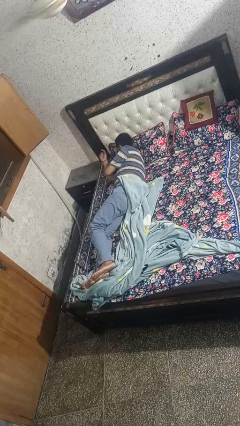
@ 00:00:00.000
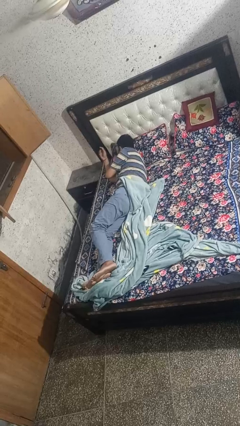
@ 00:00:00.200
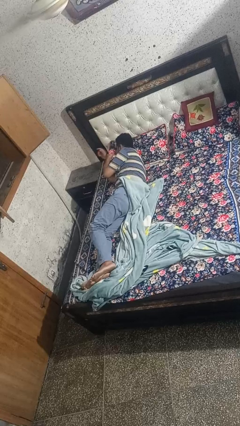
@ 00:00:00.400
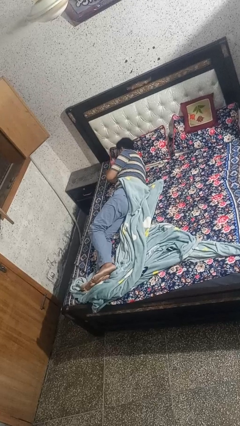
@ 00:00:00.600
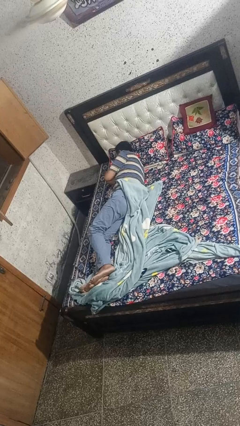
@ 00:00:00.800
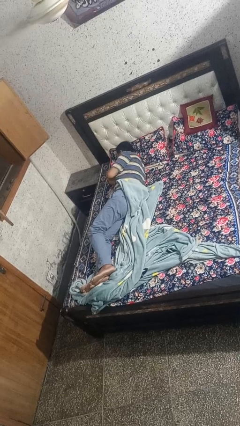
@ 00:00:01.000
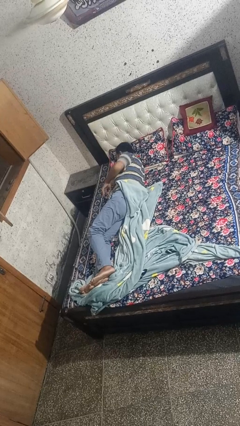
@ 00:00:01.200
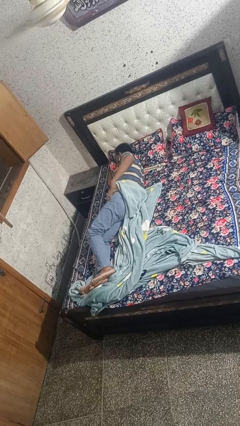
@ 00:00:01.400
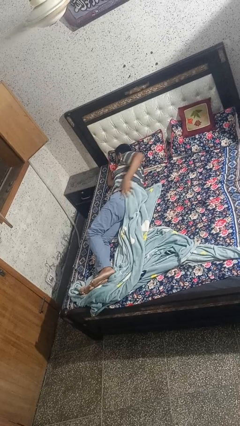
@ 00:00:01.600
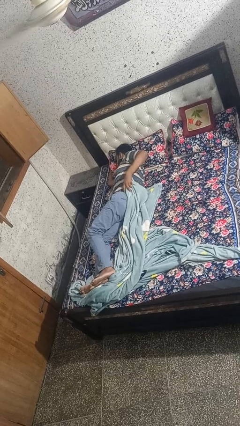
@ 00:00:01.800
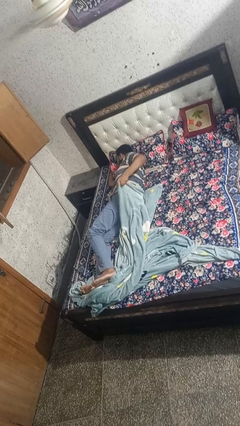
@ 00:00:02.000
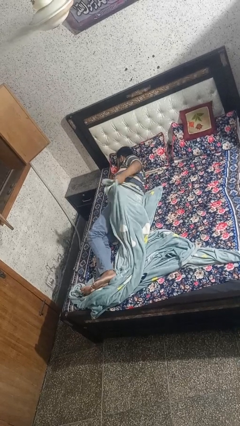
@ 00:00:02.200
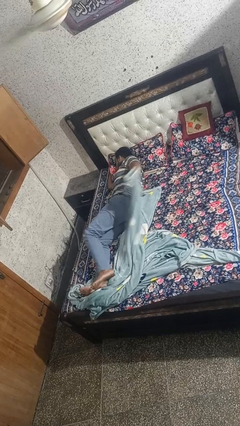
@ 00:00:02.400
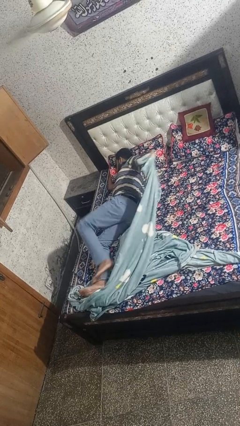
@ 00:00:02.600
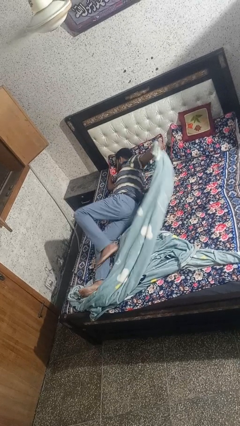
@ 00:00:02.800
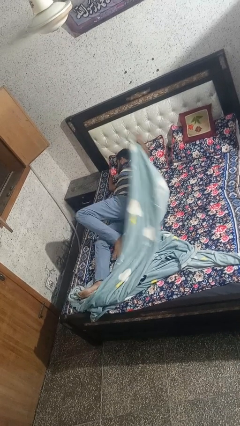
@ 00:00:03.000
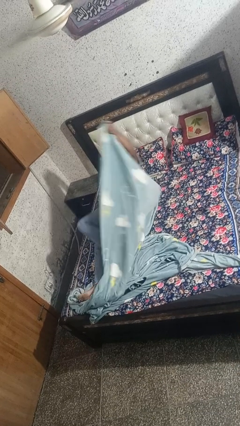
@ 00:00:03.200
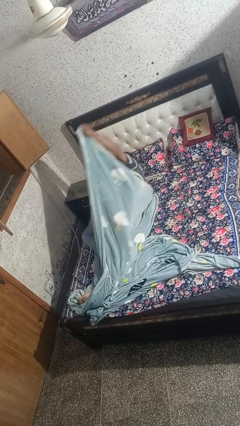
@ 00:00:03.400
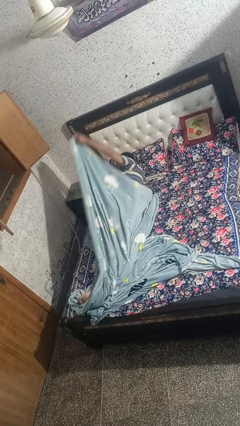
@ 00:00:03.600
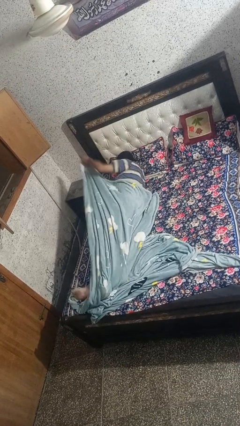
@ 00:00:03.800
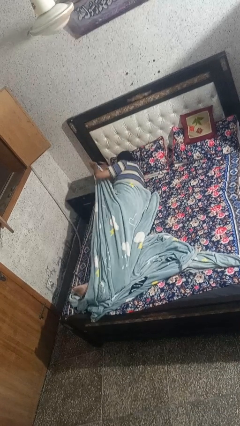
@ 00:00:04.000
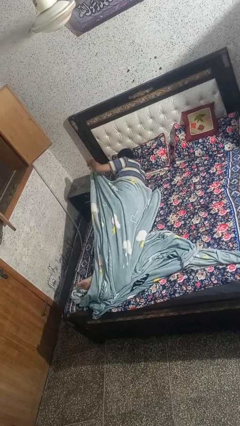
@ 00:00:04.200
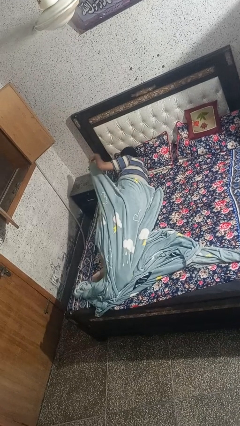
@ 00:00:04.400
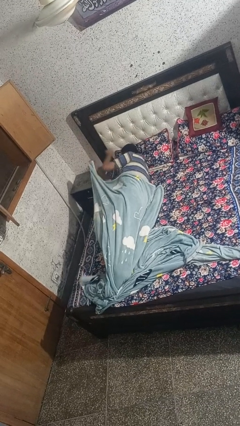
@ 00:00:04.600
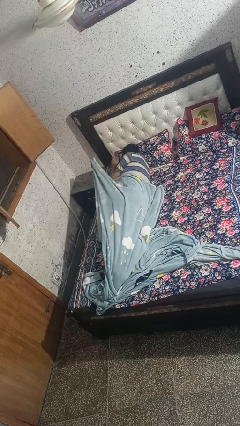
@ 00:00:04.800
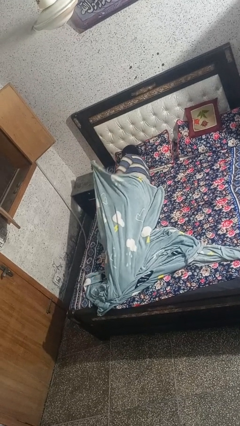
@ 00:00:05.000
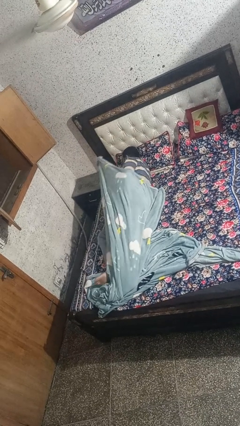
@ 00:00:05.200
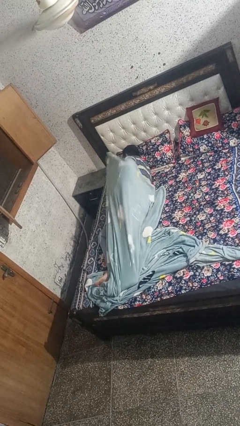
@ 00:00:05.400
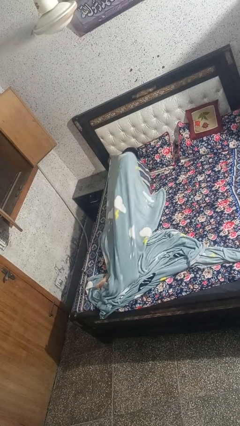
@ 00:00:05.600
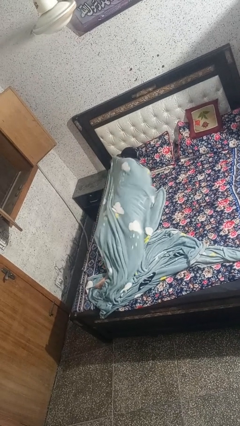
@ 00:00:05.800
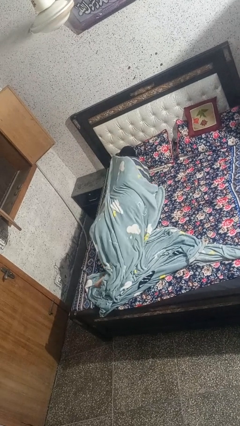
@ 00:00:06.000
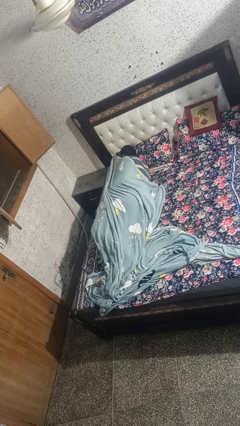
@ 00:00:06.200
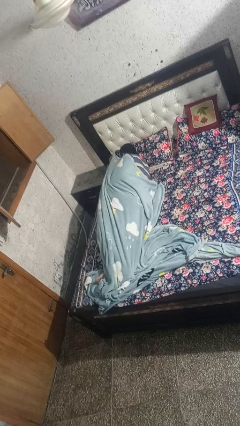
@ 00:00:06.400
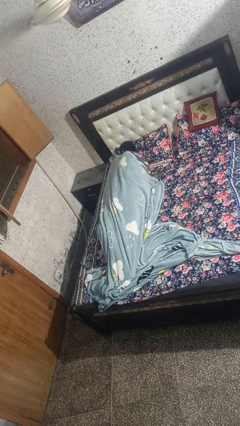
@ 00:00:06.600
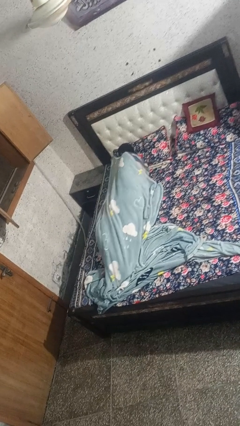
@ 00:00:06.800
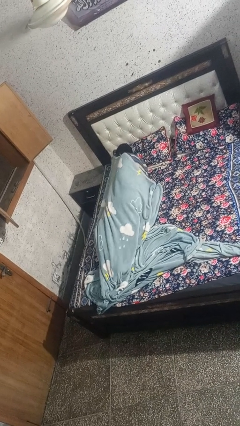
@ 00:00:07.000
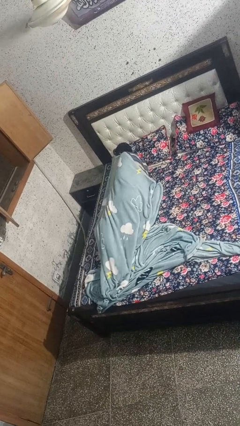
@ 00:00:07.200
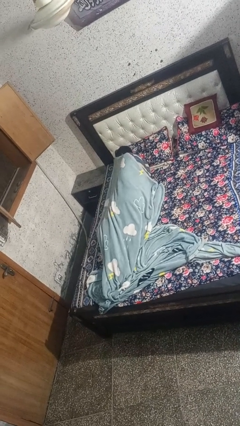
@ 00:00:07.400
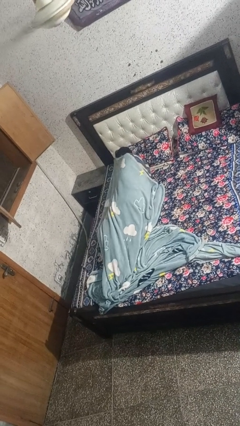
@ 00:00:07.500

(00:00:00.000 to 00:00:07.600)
person covers with bedsheets

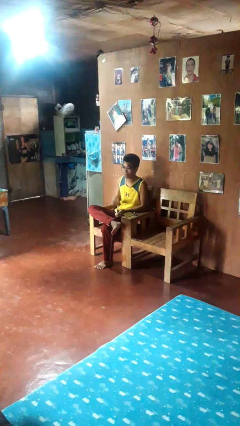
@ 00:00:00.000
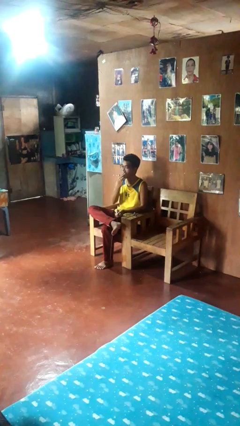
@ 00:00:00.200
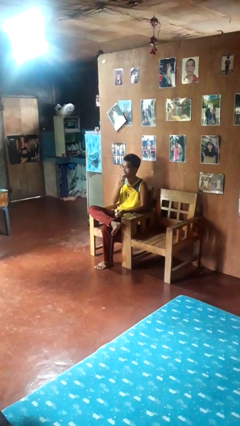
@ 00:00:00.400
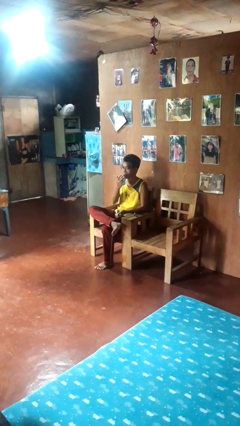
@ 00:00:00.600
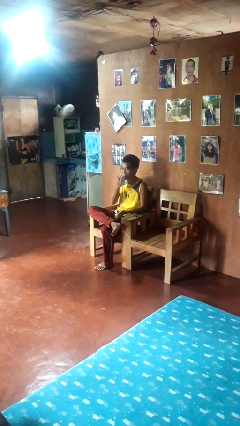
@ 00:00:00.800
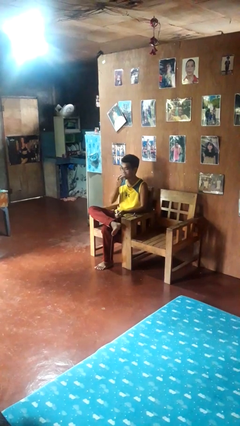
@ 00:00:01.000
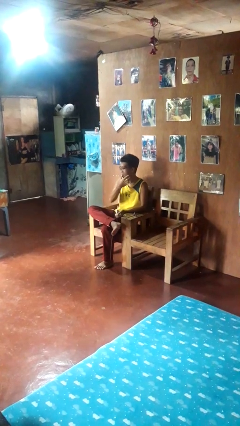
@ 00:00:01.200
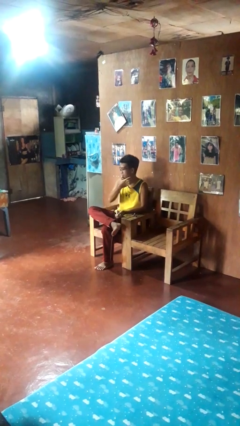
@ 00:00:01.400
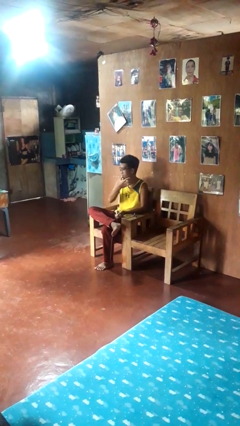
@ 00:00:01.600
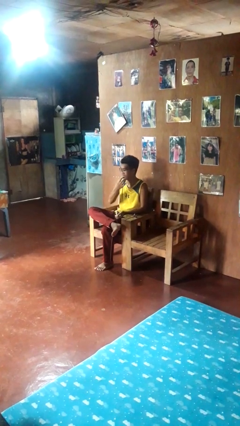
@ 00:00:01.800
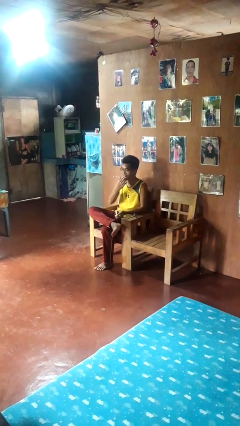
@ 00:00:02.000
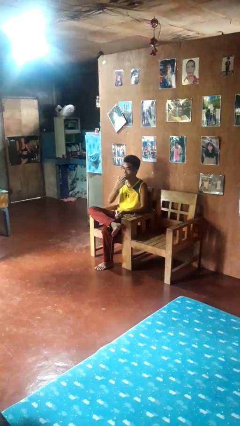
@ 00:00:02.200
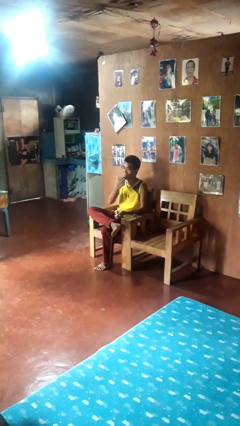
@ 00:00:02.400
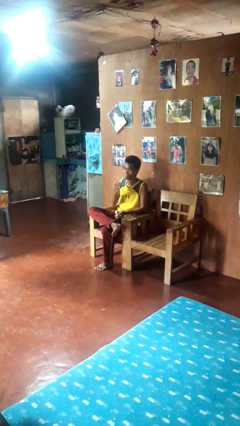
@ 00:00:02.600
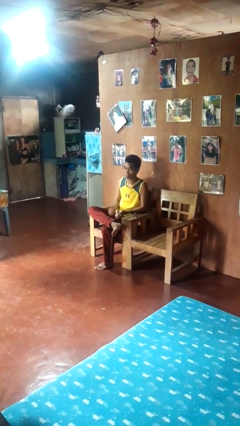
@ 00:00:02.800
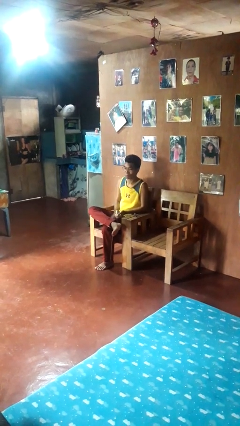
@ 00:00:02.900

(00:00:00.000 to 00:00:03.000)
person licks fingers

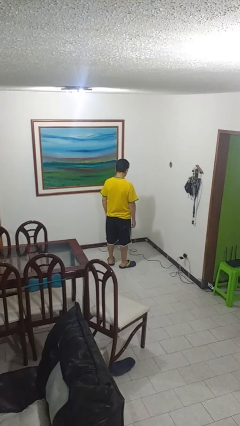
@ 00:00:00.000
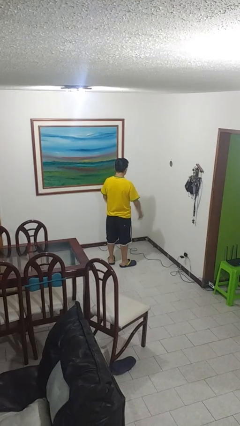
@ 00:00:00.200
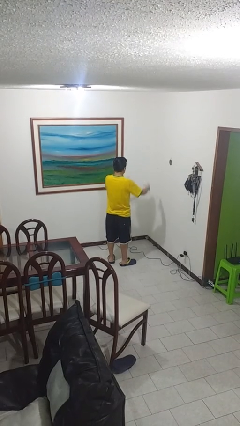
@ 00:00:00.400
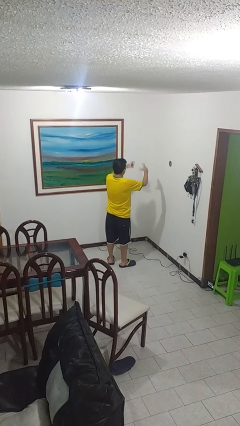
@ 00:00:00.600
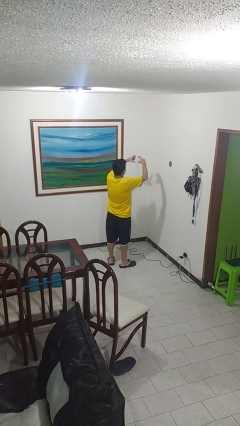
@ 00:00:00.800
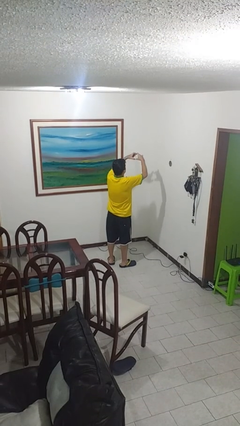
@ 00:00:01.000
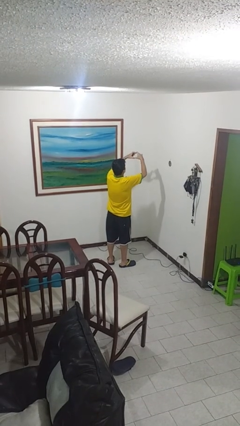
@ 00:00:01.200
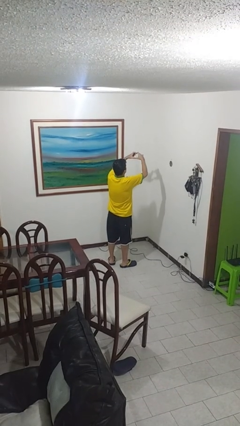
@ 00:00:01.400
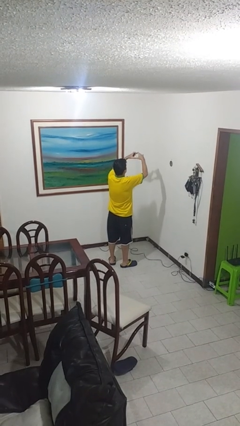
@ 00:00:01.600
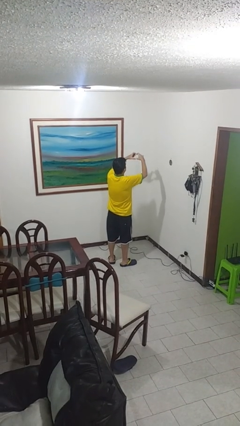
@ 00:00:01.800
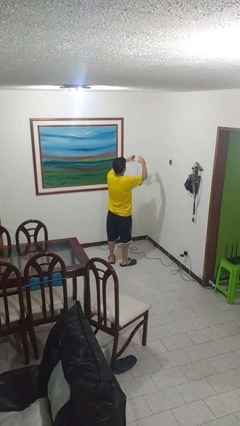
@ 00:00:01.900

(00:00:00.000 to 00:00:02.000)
person gestures heart

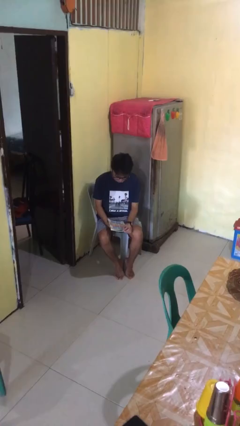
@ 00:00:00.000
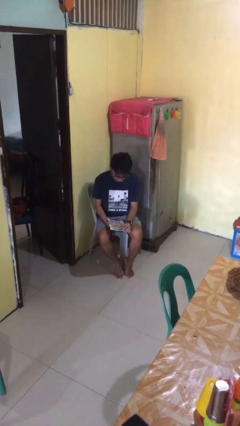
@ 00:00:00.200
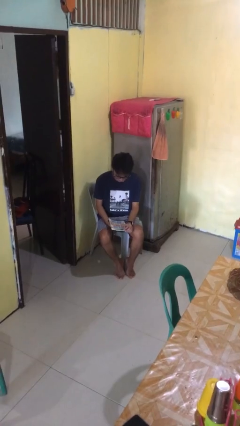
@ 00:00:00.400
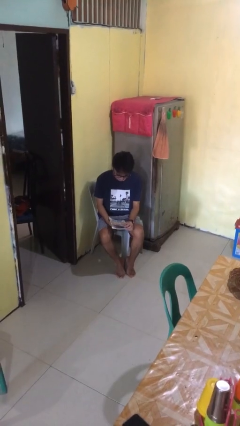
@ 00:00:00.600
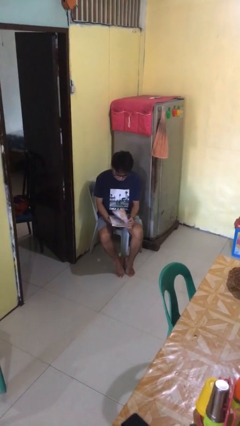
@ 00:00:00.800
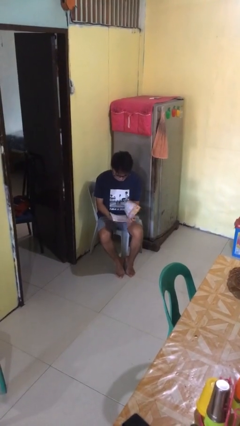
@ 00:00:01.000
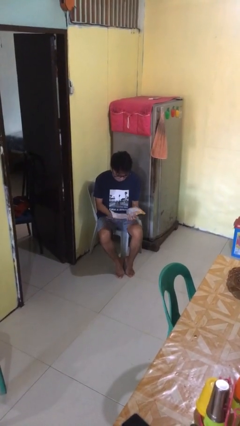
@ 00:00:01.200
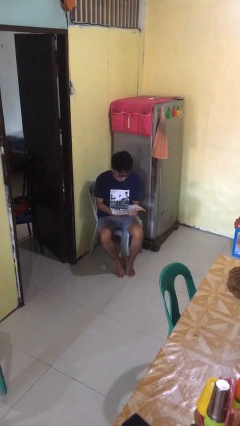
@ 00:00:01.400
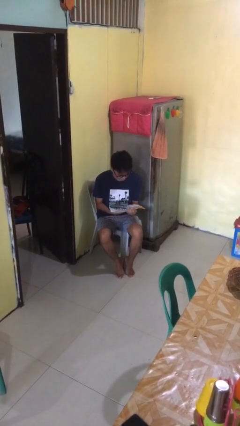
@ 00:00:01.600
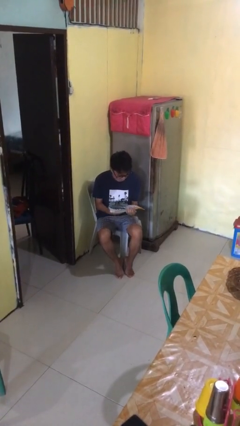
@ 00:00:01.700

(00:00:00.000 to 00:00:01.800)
person reads magazine

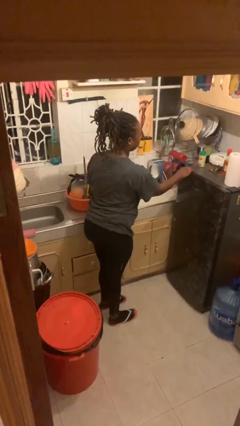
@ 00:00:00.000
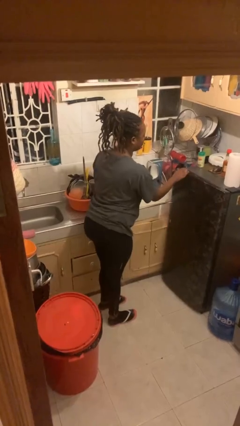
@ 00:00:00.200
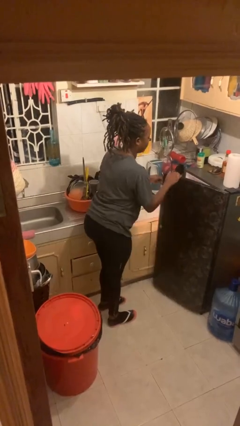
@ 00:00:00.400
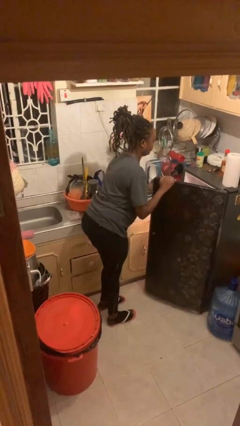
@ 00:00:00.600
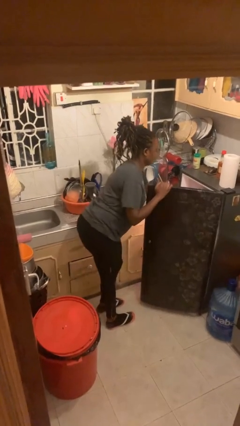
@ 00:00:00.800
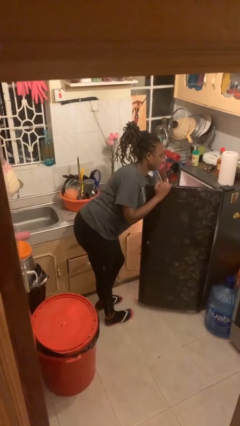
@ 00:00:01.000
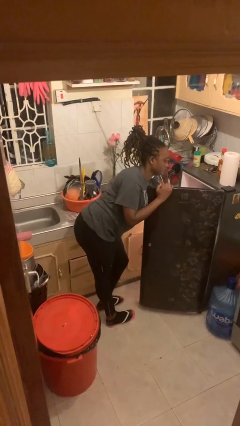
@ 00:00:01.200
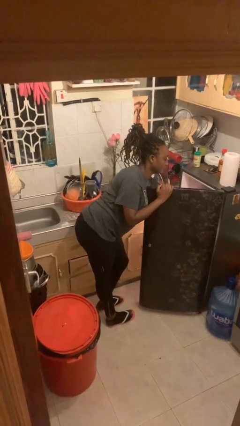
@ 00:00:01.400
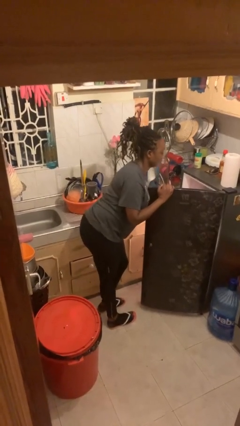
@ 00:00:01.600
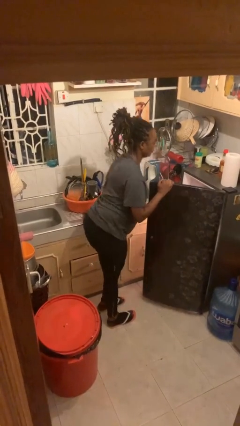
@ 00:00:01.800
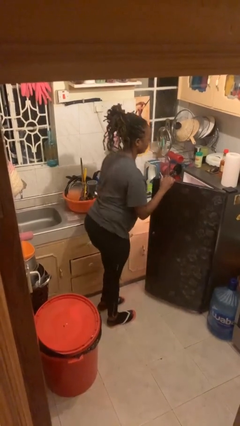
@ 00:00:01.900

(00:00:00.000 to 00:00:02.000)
person takes object from refrigerator

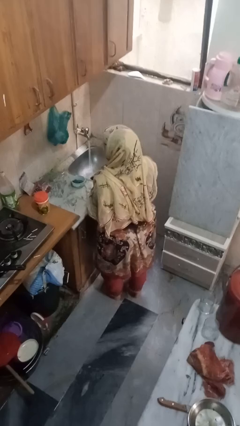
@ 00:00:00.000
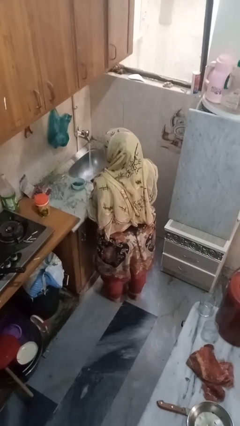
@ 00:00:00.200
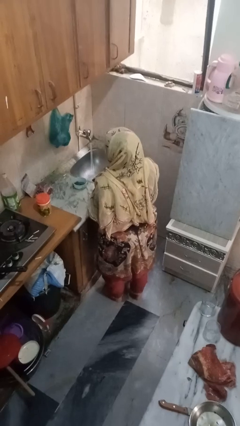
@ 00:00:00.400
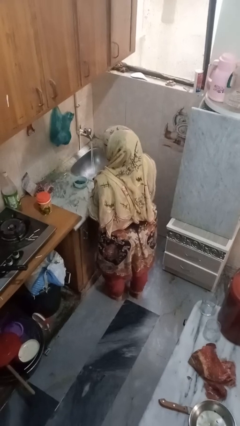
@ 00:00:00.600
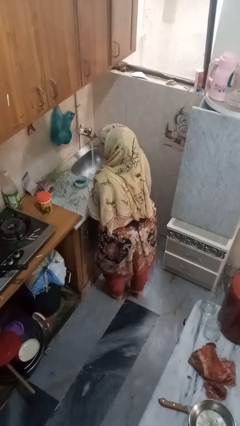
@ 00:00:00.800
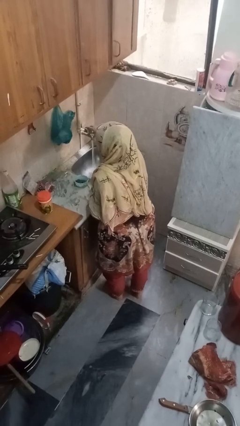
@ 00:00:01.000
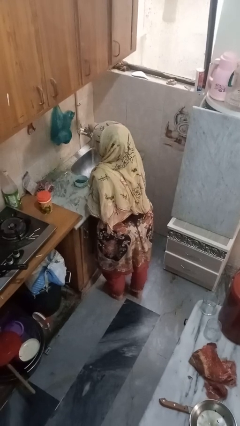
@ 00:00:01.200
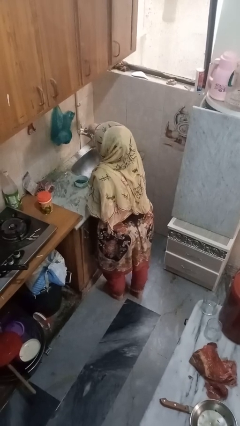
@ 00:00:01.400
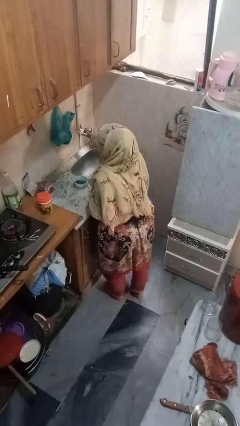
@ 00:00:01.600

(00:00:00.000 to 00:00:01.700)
person turns off faucet
